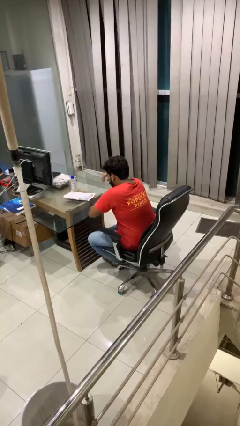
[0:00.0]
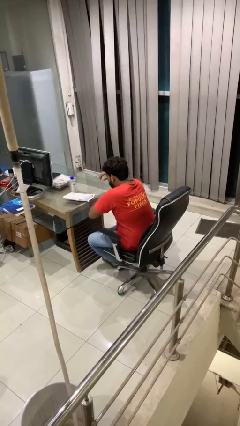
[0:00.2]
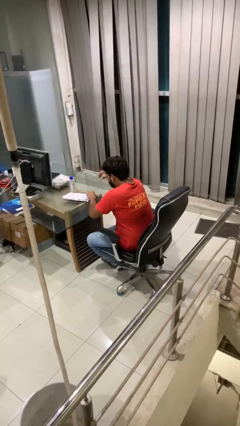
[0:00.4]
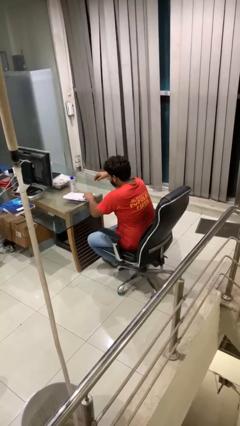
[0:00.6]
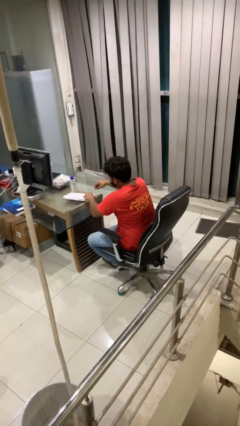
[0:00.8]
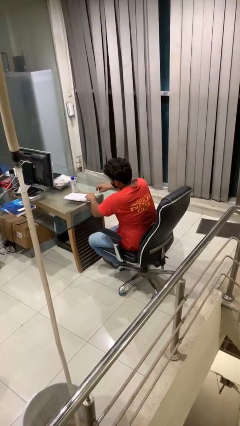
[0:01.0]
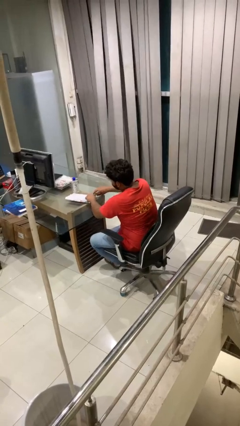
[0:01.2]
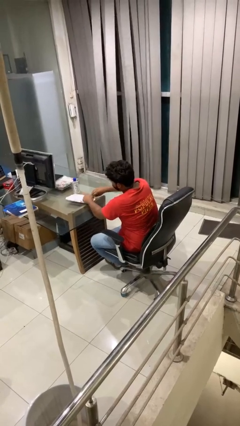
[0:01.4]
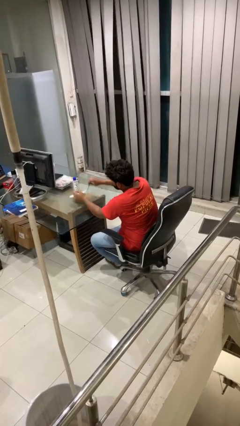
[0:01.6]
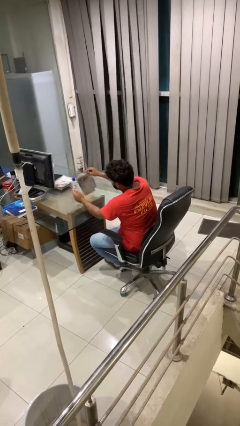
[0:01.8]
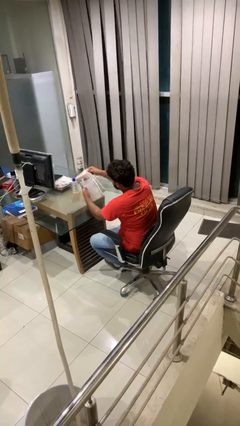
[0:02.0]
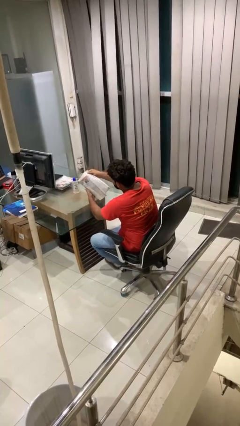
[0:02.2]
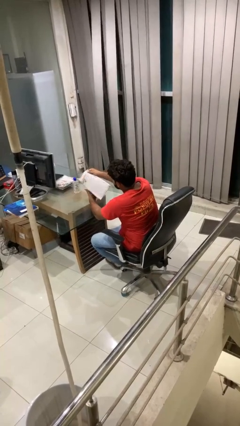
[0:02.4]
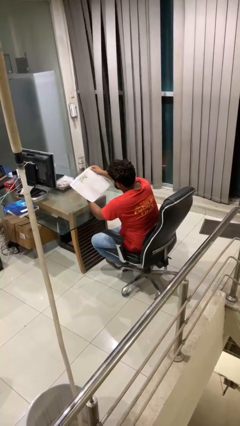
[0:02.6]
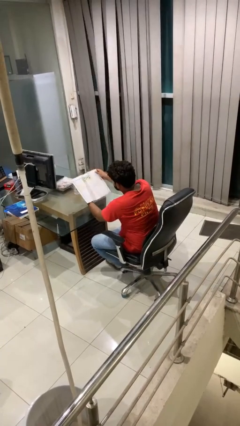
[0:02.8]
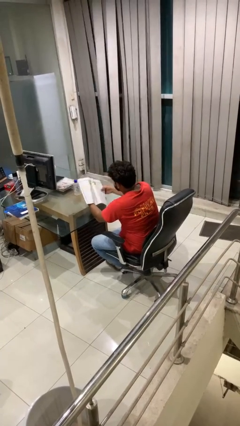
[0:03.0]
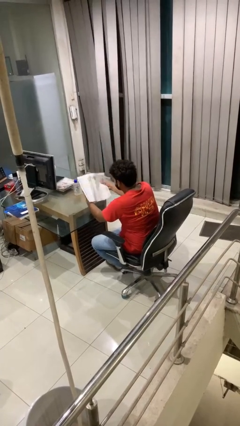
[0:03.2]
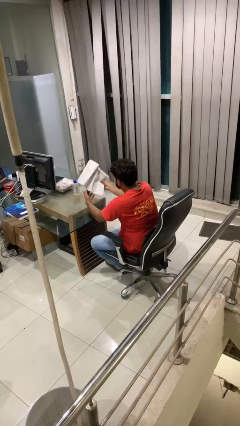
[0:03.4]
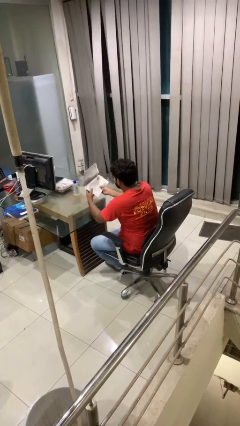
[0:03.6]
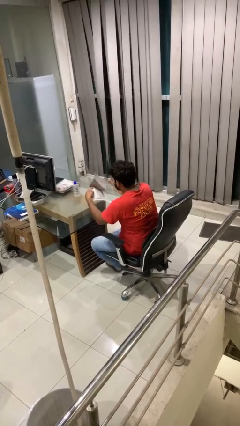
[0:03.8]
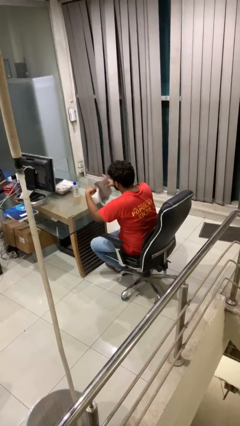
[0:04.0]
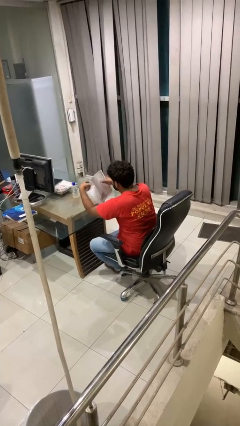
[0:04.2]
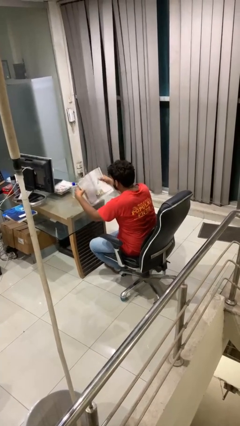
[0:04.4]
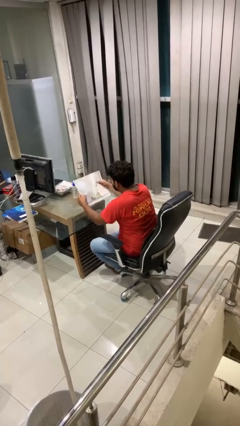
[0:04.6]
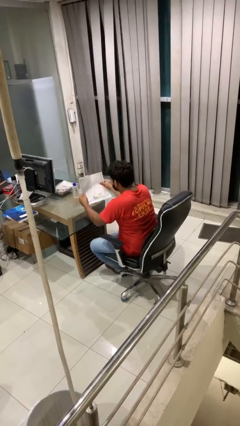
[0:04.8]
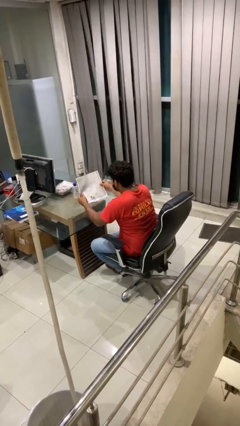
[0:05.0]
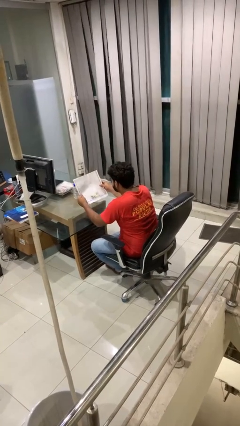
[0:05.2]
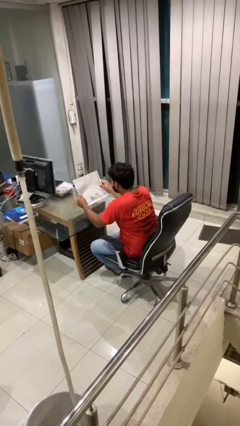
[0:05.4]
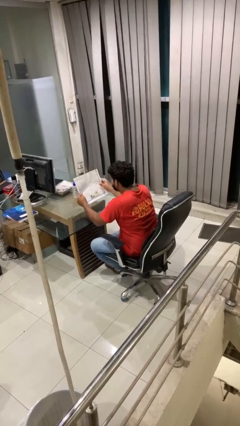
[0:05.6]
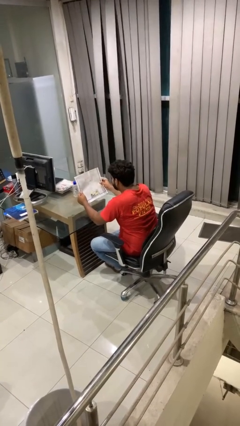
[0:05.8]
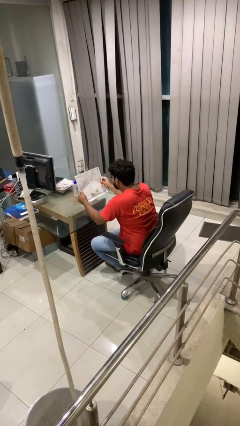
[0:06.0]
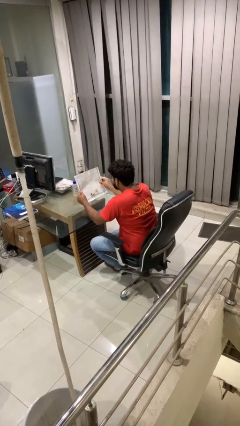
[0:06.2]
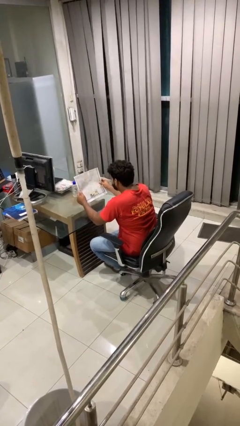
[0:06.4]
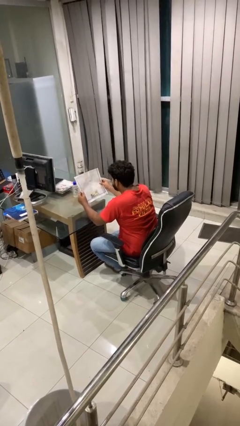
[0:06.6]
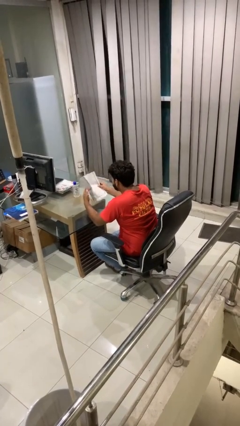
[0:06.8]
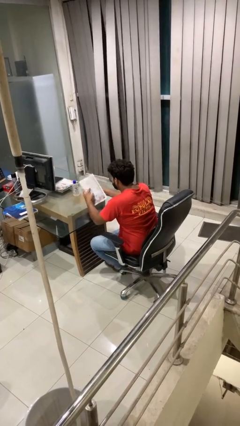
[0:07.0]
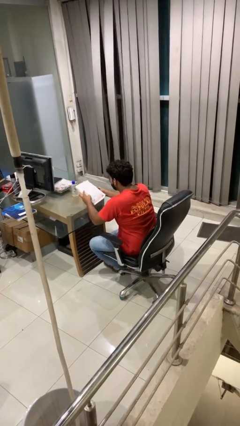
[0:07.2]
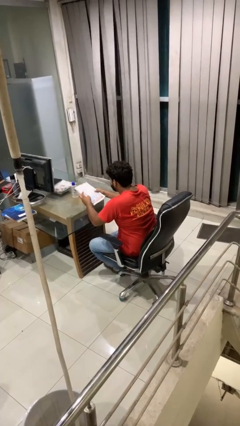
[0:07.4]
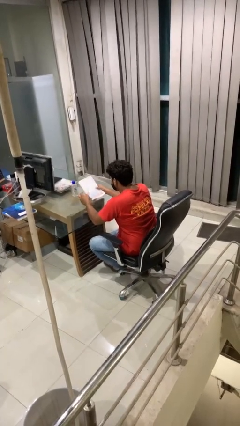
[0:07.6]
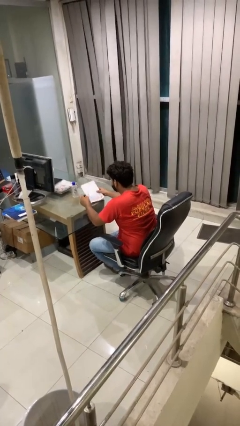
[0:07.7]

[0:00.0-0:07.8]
person reads newspaper

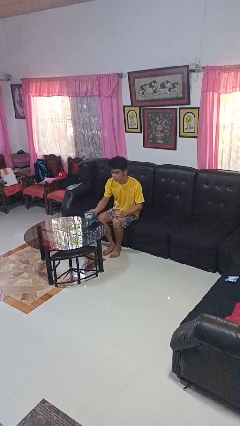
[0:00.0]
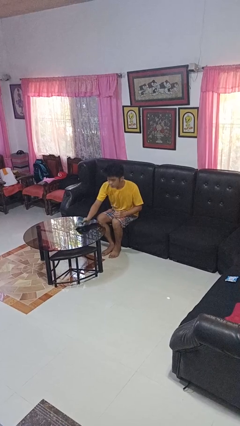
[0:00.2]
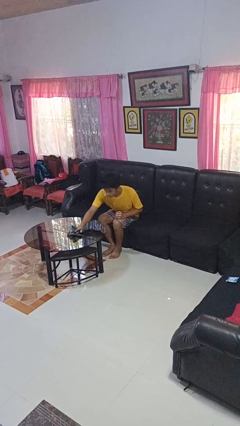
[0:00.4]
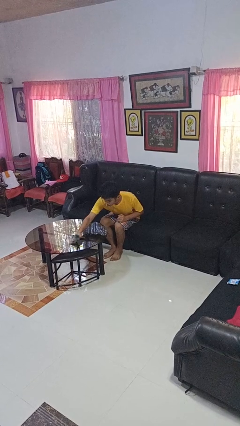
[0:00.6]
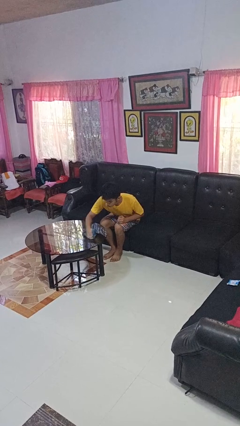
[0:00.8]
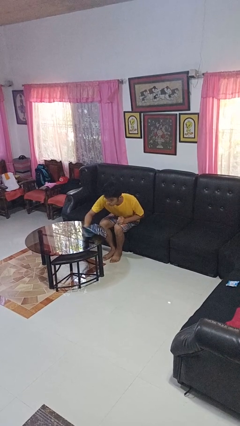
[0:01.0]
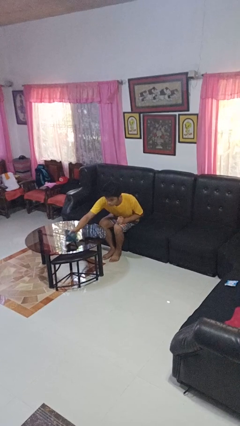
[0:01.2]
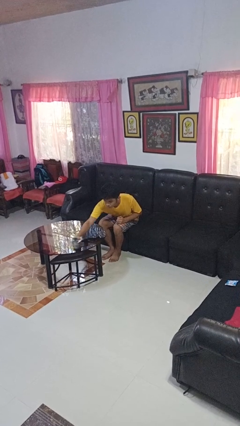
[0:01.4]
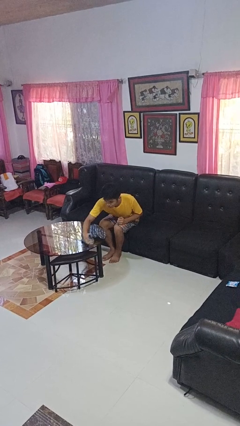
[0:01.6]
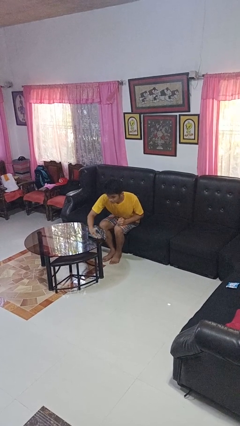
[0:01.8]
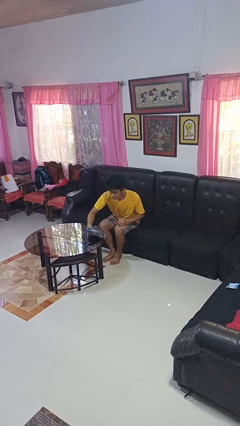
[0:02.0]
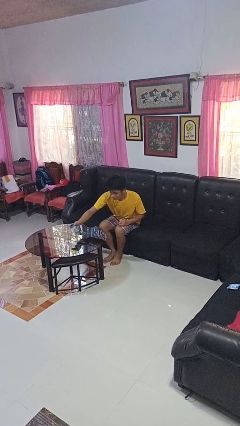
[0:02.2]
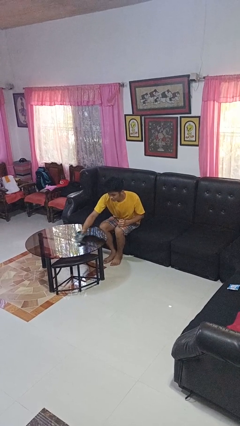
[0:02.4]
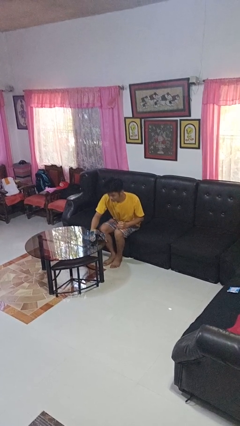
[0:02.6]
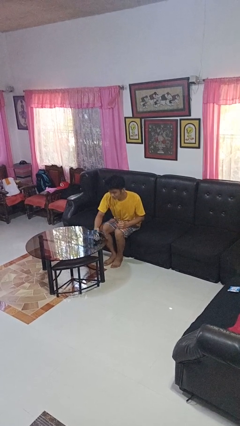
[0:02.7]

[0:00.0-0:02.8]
person cleans table with rag

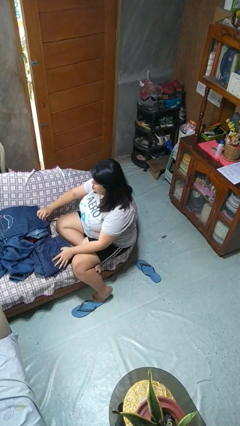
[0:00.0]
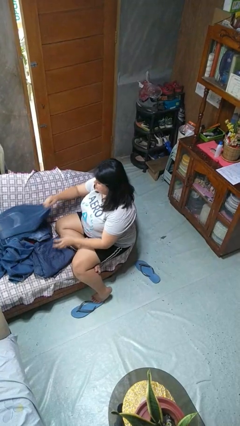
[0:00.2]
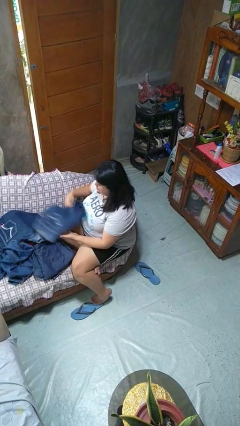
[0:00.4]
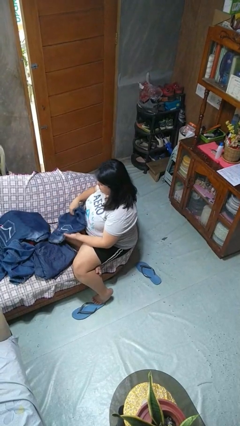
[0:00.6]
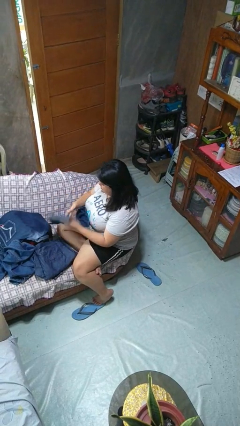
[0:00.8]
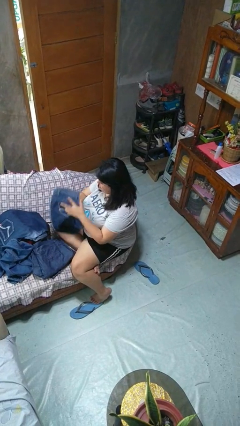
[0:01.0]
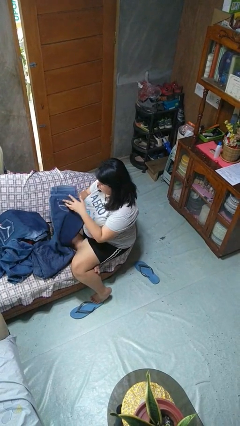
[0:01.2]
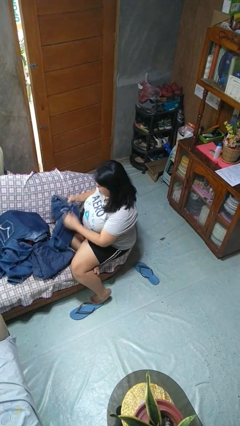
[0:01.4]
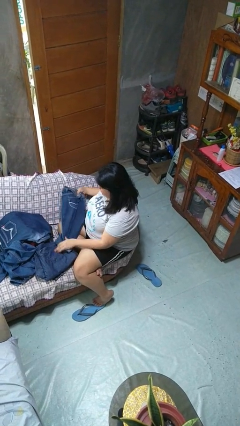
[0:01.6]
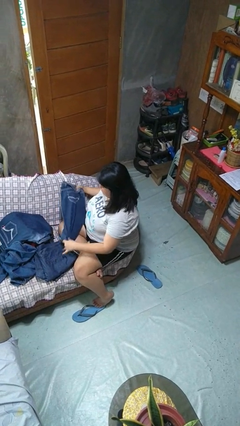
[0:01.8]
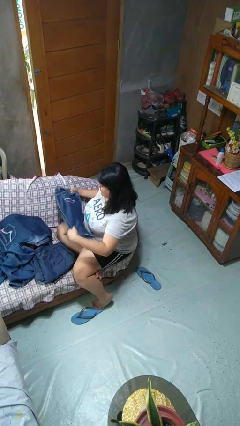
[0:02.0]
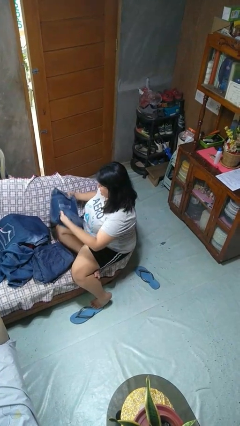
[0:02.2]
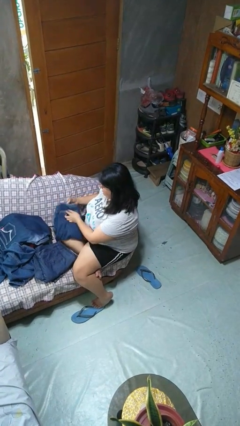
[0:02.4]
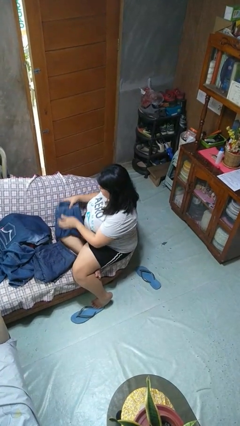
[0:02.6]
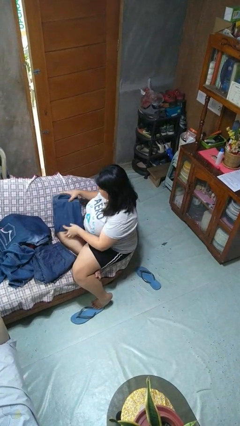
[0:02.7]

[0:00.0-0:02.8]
person folds pants

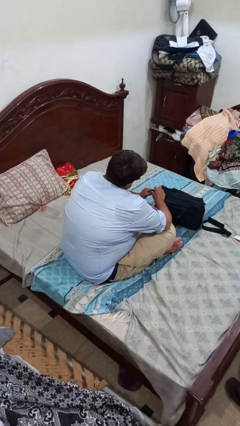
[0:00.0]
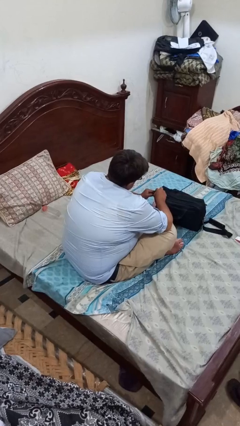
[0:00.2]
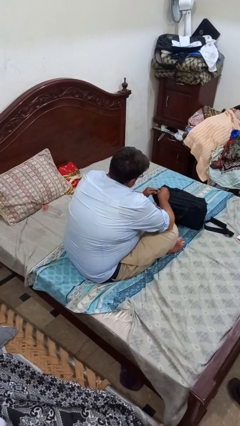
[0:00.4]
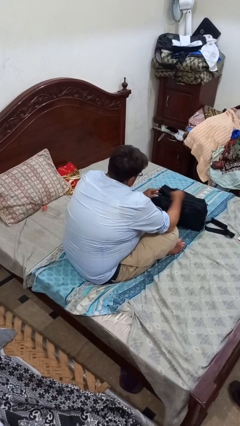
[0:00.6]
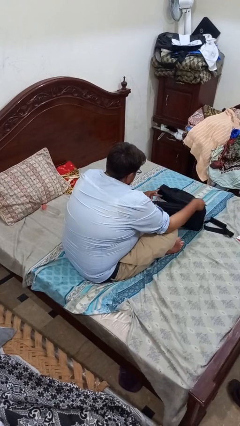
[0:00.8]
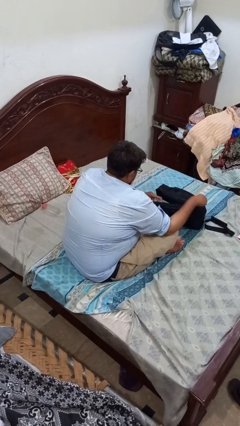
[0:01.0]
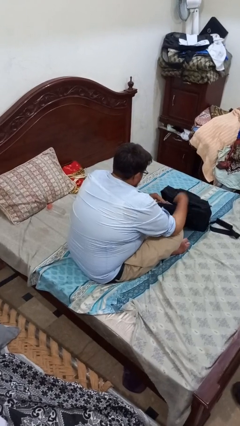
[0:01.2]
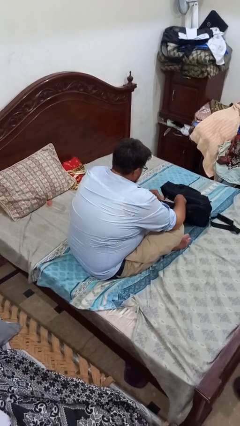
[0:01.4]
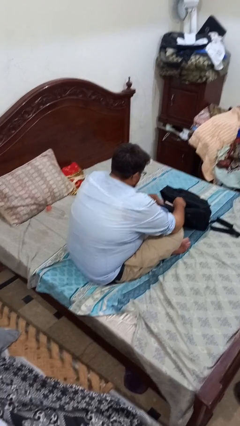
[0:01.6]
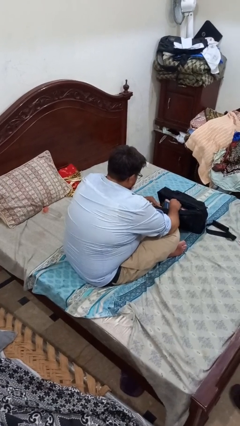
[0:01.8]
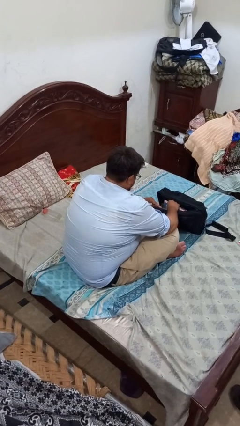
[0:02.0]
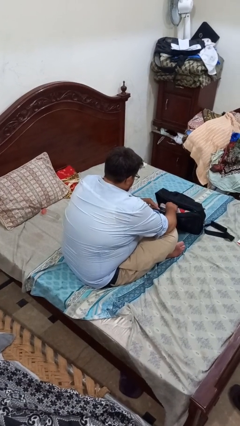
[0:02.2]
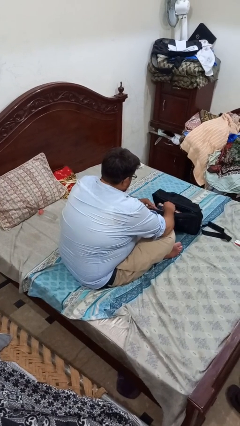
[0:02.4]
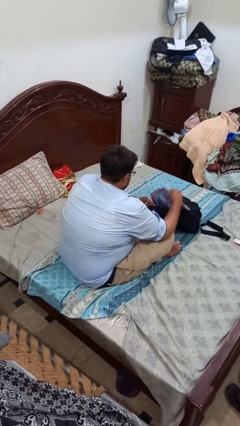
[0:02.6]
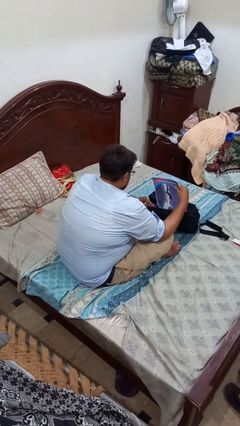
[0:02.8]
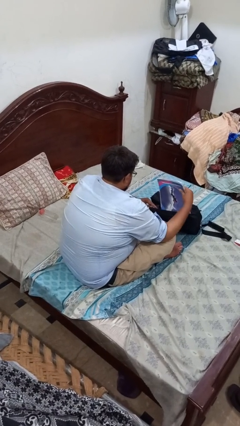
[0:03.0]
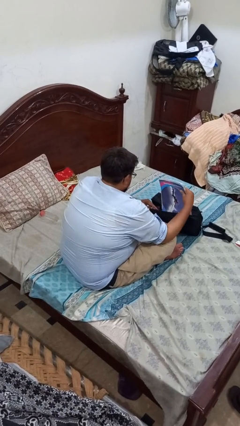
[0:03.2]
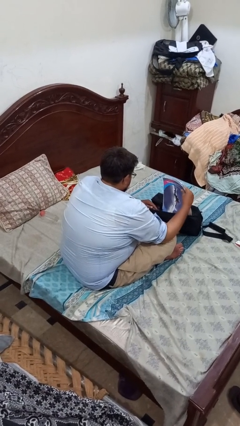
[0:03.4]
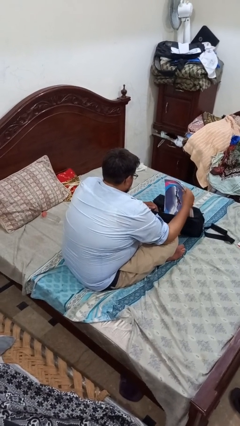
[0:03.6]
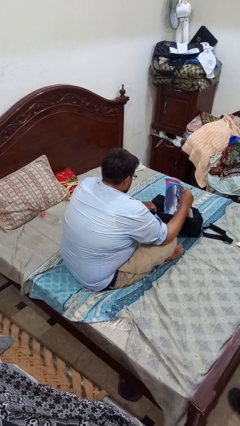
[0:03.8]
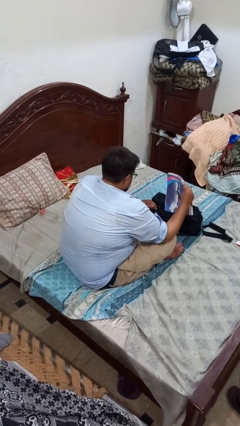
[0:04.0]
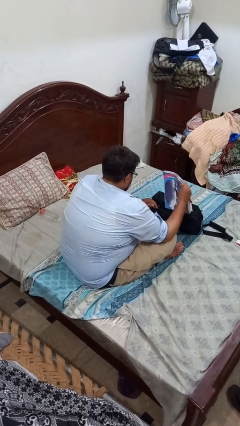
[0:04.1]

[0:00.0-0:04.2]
person searches in bag
